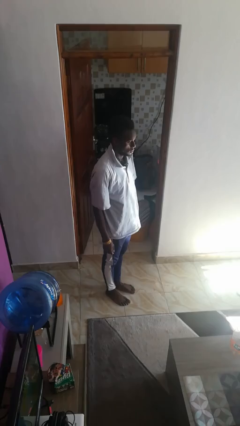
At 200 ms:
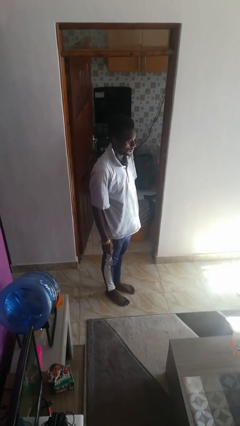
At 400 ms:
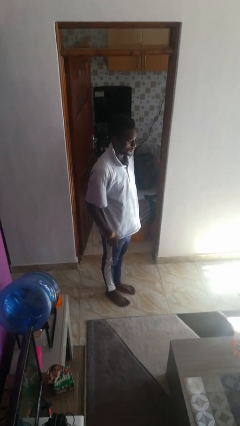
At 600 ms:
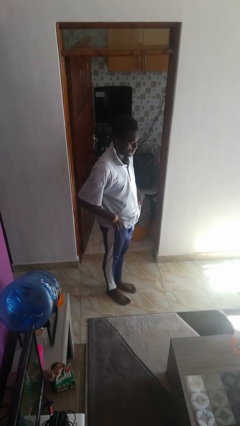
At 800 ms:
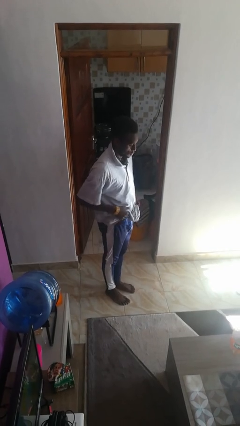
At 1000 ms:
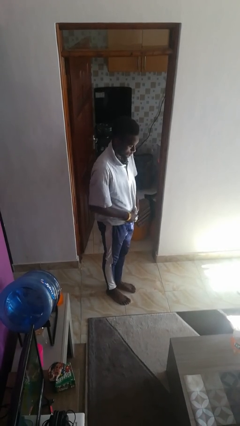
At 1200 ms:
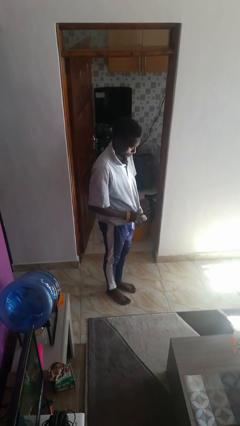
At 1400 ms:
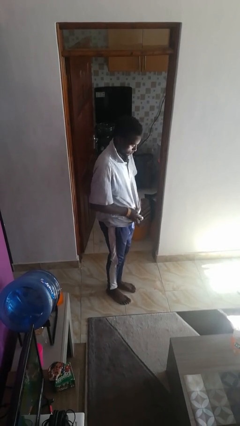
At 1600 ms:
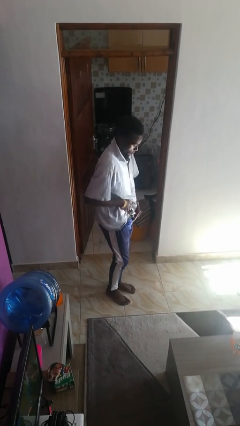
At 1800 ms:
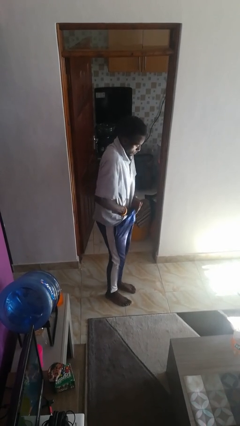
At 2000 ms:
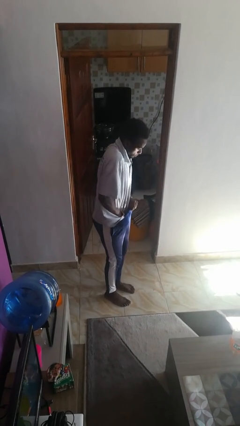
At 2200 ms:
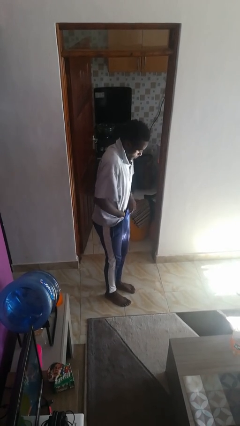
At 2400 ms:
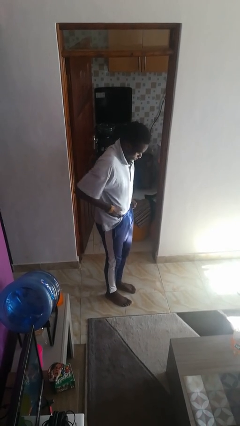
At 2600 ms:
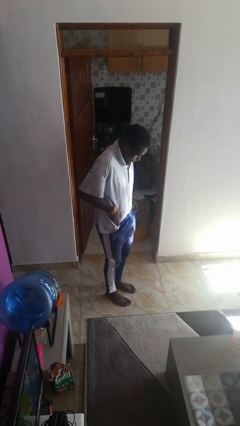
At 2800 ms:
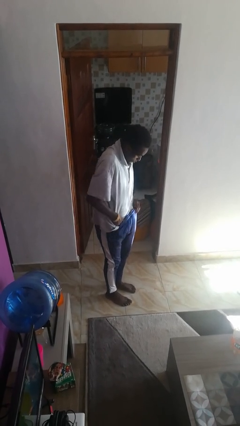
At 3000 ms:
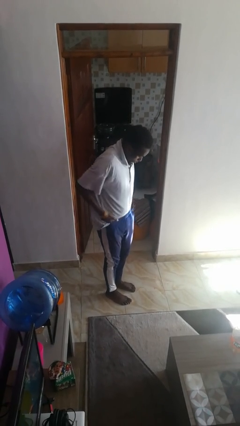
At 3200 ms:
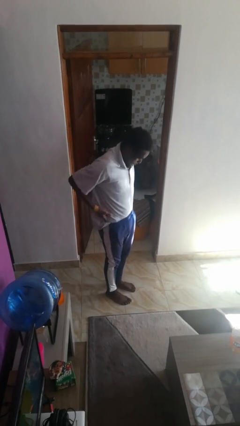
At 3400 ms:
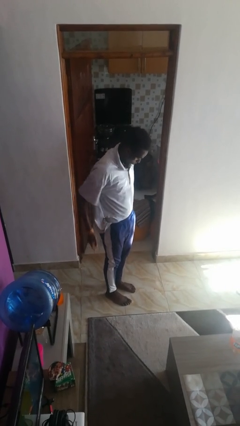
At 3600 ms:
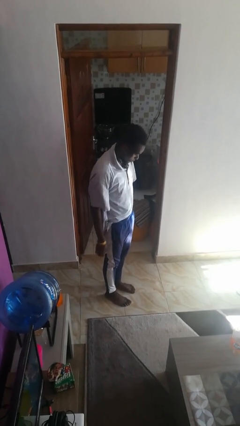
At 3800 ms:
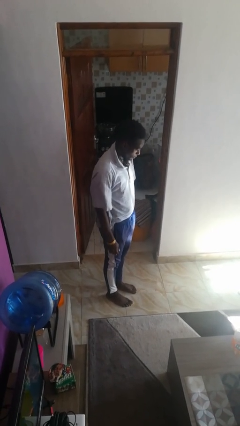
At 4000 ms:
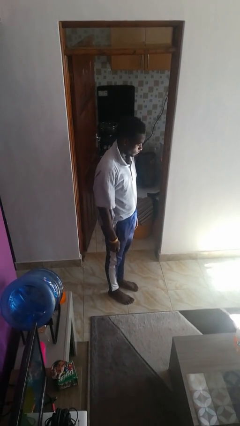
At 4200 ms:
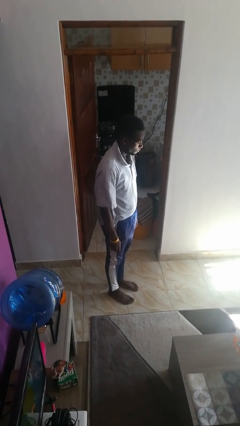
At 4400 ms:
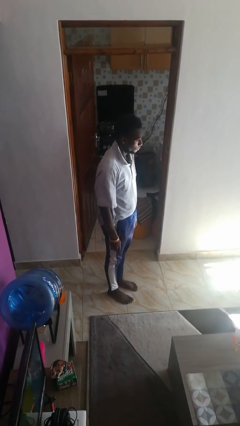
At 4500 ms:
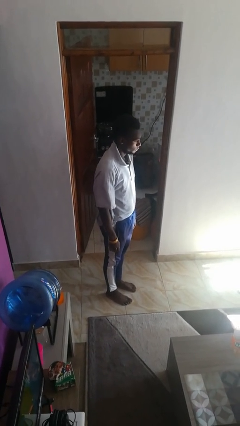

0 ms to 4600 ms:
person tucks in shirt

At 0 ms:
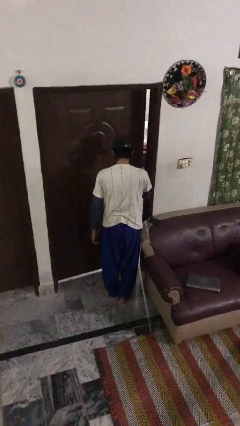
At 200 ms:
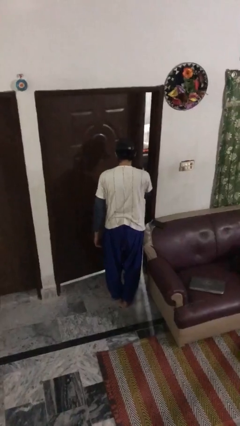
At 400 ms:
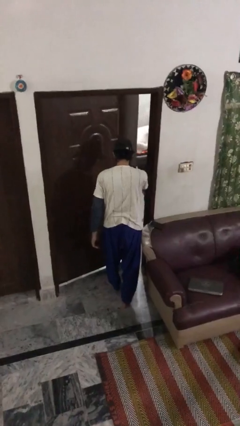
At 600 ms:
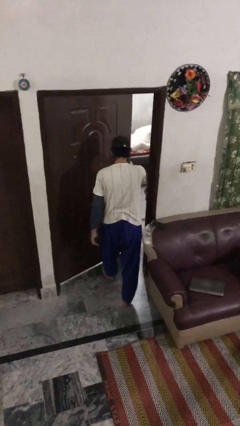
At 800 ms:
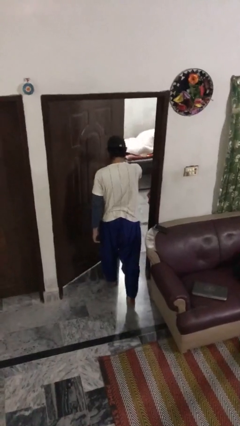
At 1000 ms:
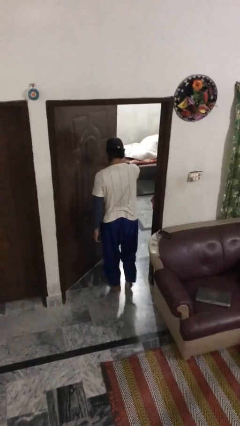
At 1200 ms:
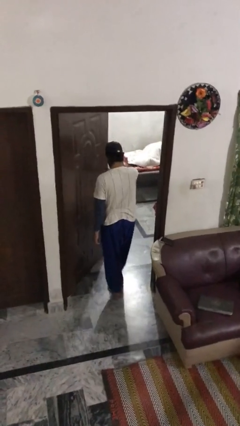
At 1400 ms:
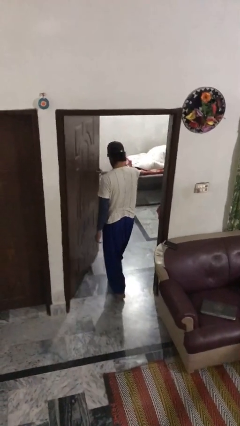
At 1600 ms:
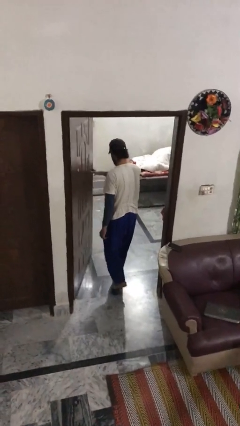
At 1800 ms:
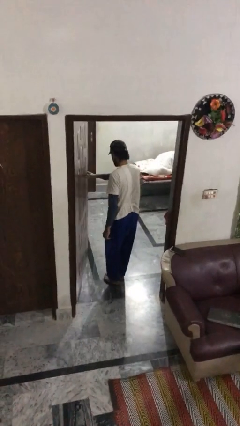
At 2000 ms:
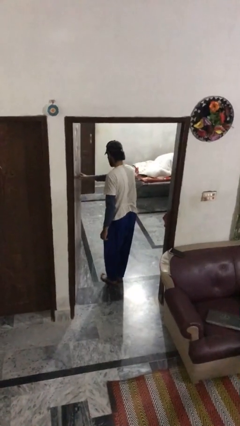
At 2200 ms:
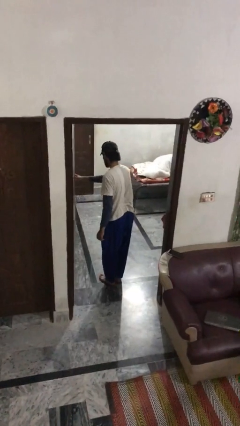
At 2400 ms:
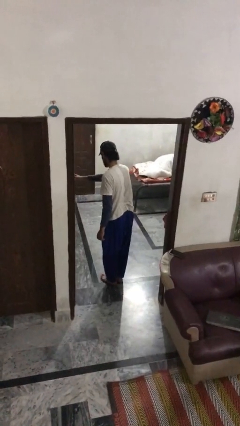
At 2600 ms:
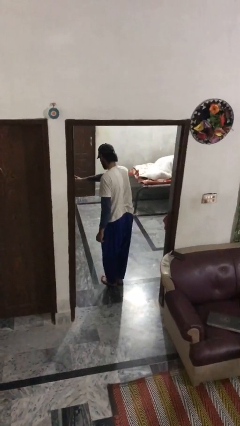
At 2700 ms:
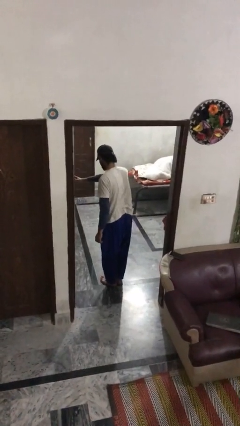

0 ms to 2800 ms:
person opens facility door

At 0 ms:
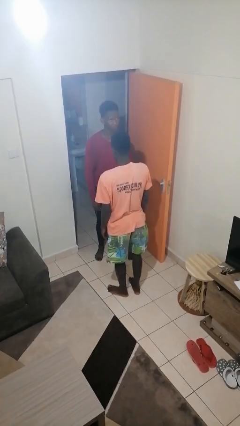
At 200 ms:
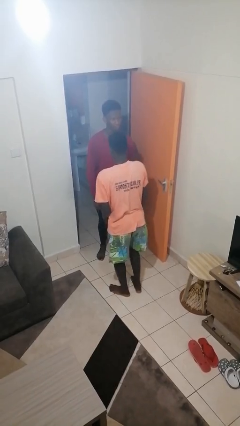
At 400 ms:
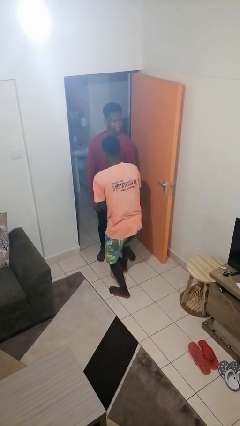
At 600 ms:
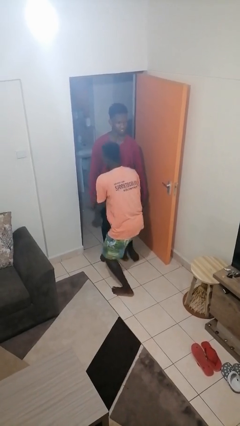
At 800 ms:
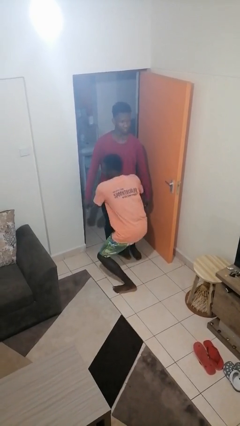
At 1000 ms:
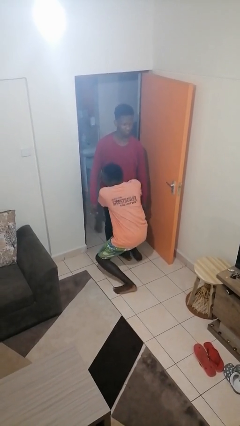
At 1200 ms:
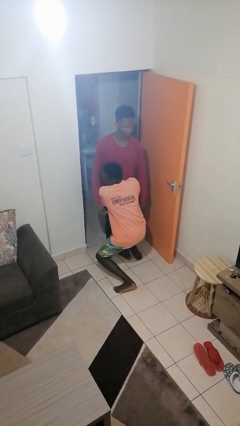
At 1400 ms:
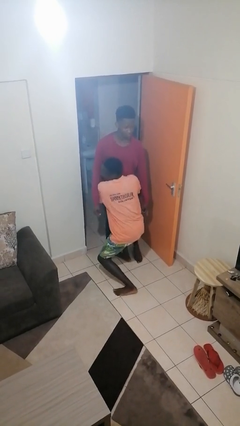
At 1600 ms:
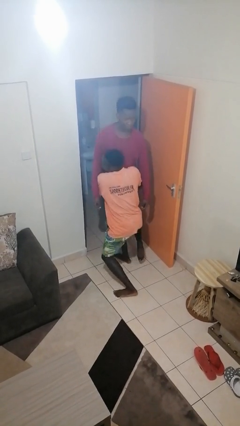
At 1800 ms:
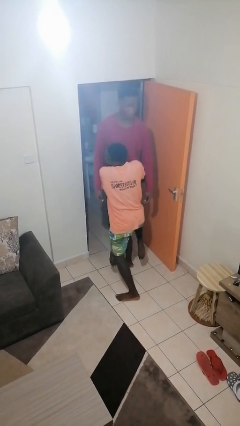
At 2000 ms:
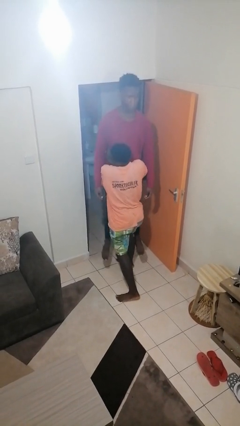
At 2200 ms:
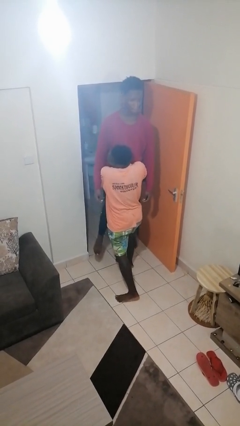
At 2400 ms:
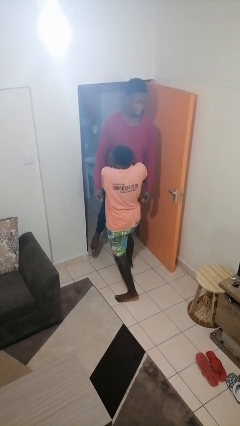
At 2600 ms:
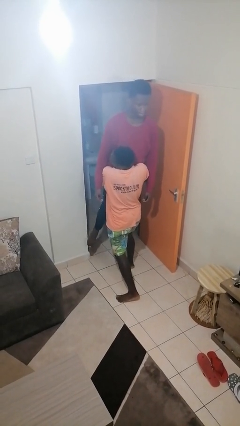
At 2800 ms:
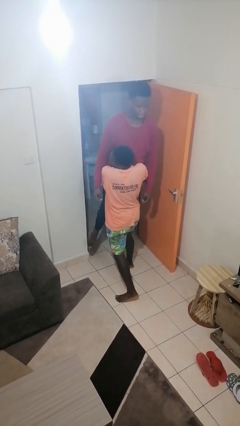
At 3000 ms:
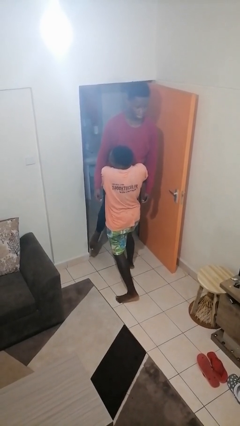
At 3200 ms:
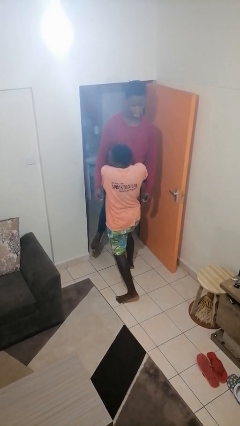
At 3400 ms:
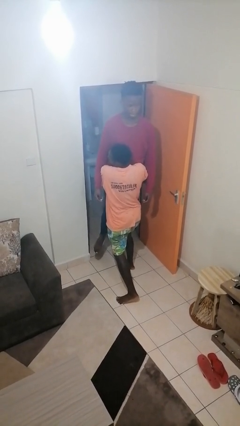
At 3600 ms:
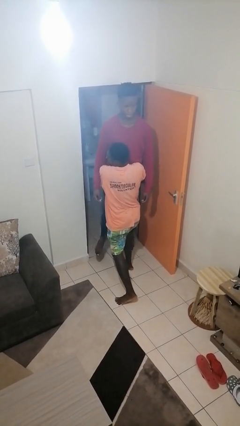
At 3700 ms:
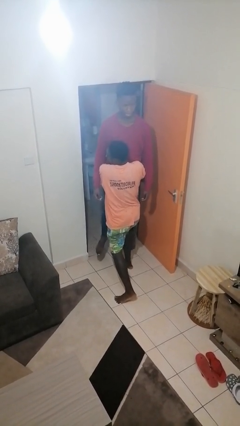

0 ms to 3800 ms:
person picks up person

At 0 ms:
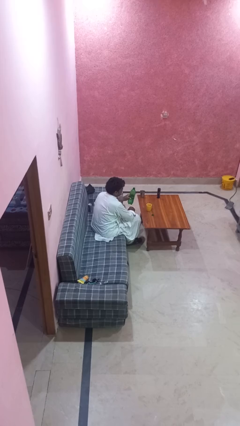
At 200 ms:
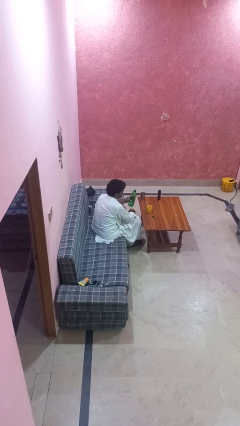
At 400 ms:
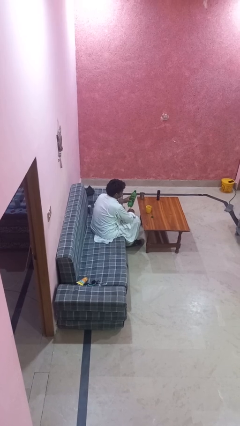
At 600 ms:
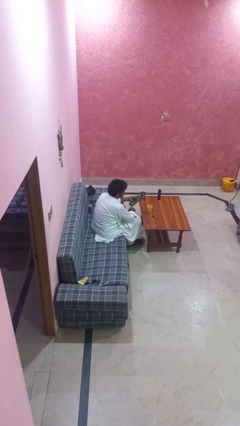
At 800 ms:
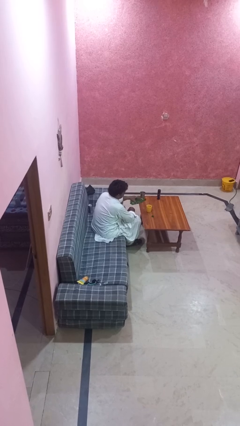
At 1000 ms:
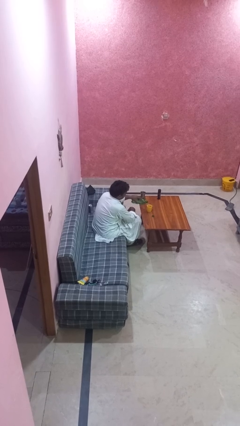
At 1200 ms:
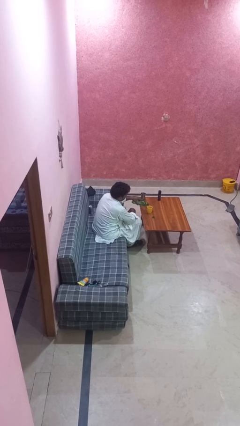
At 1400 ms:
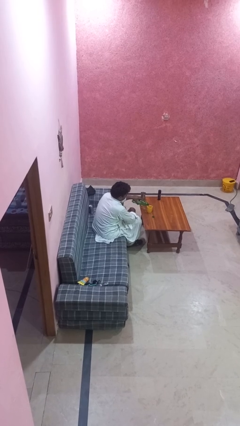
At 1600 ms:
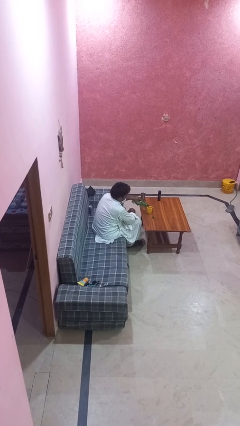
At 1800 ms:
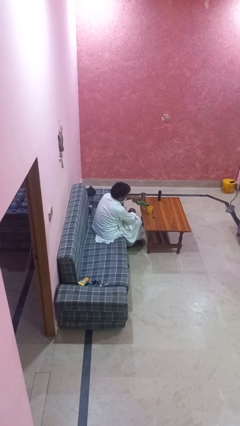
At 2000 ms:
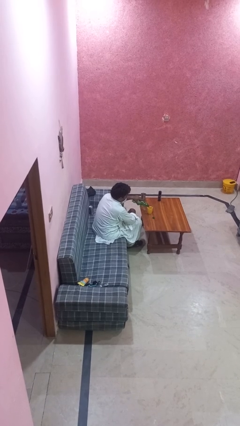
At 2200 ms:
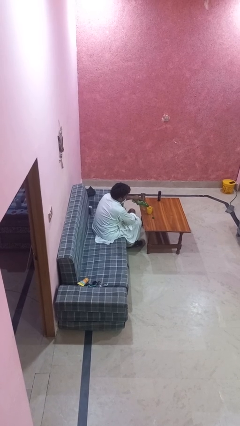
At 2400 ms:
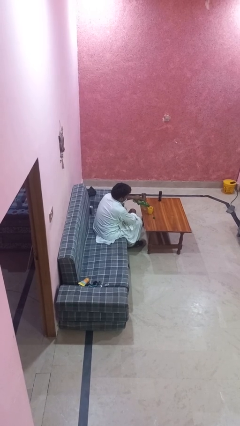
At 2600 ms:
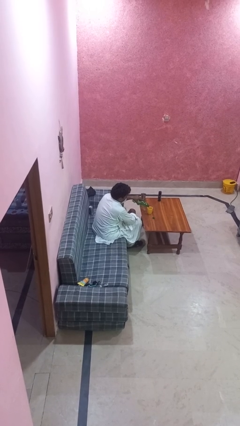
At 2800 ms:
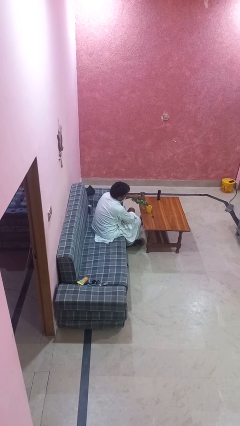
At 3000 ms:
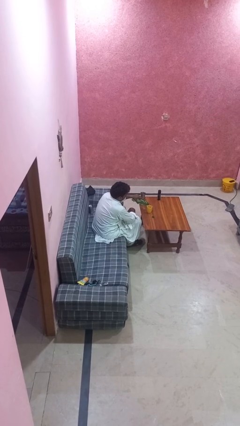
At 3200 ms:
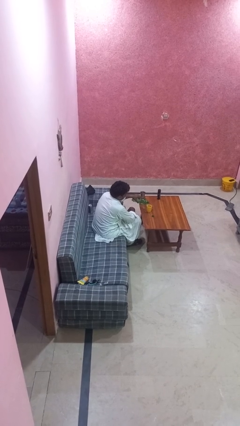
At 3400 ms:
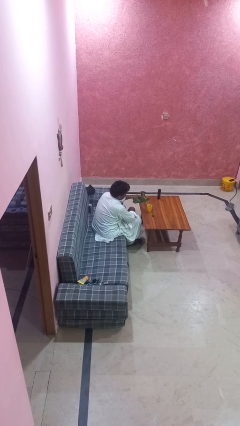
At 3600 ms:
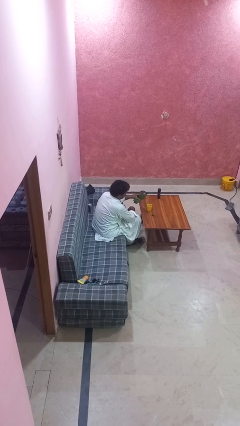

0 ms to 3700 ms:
person pours liquid into cup

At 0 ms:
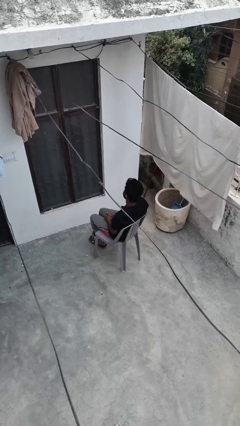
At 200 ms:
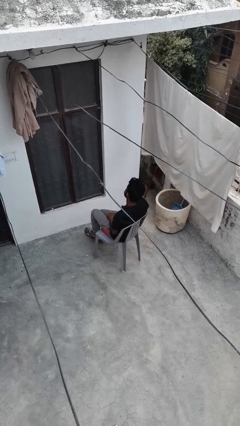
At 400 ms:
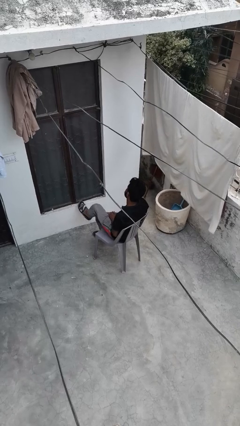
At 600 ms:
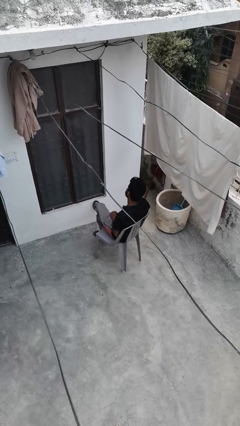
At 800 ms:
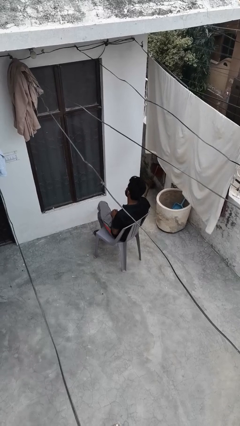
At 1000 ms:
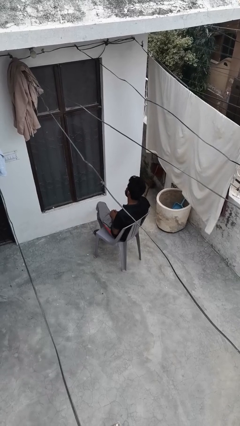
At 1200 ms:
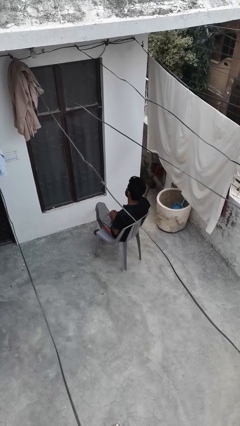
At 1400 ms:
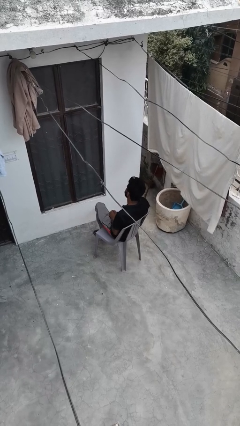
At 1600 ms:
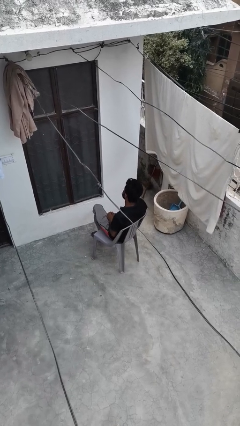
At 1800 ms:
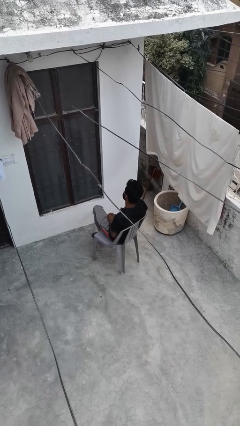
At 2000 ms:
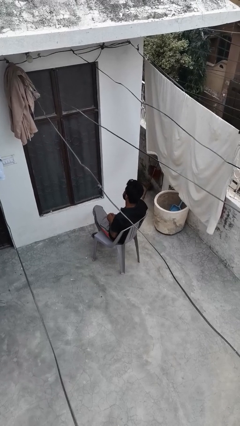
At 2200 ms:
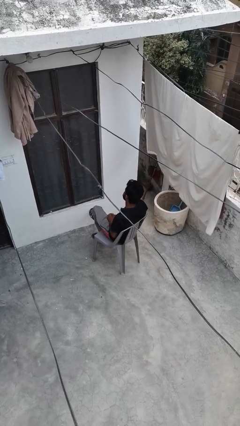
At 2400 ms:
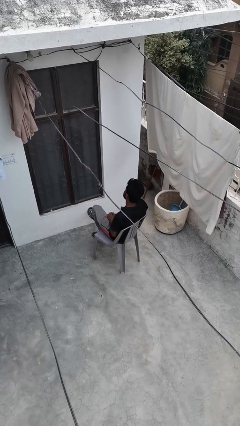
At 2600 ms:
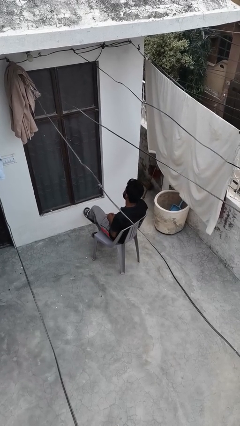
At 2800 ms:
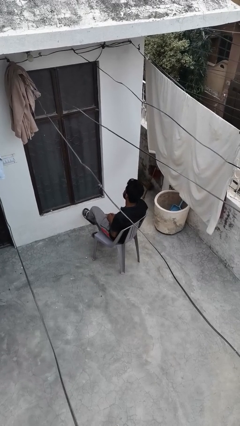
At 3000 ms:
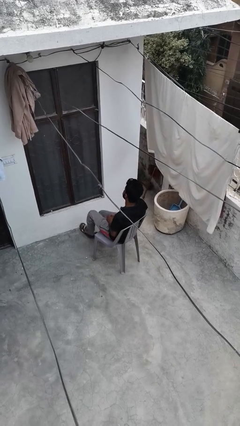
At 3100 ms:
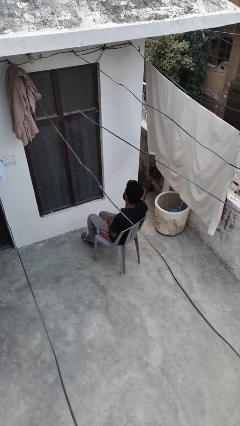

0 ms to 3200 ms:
person crosses legs
